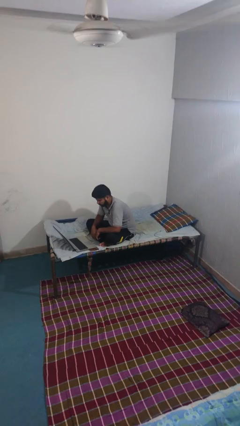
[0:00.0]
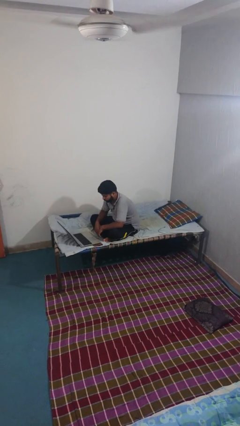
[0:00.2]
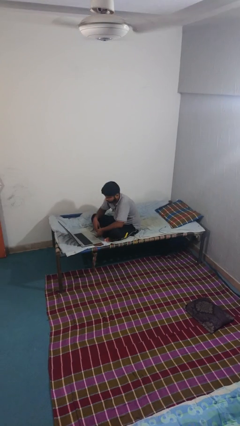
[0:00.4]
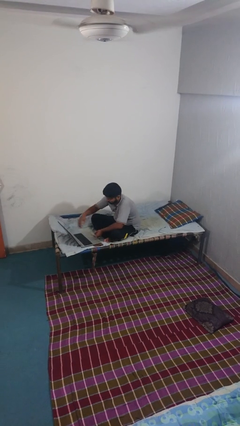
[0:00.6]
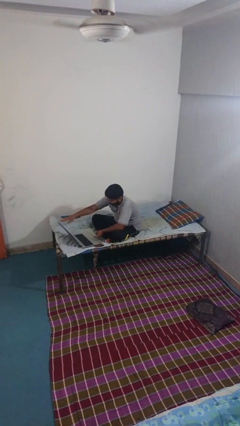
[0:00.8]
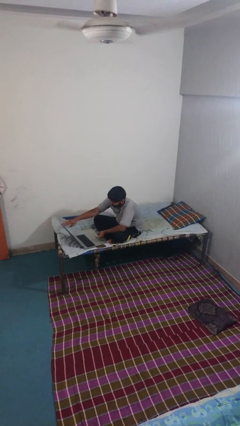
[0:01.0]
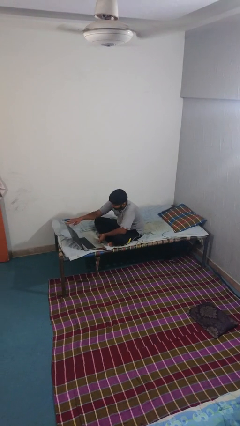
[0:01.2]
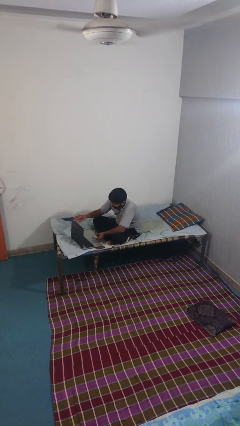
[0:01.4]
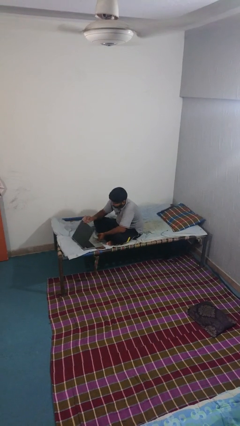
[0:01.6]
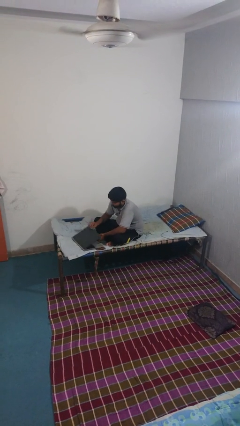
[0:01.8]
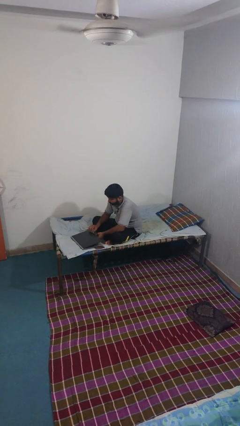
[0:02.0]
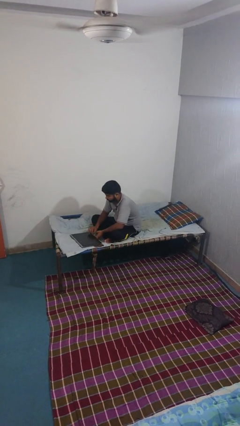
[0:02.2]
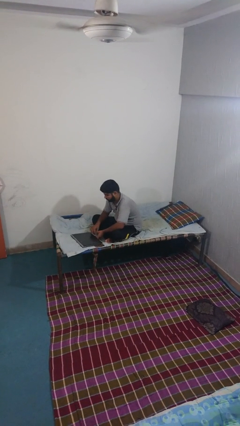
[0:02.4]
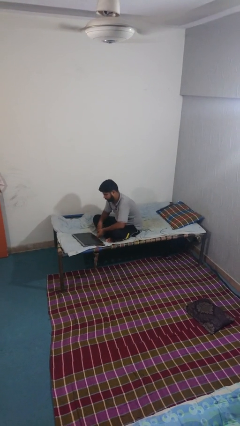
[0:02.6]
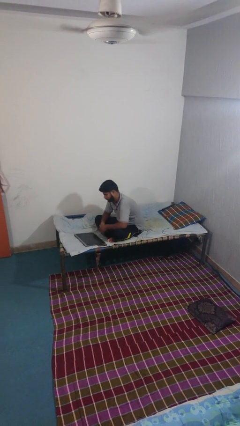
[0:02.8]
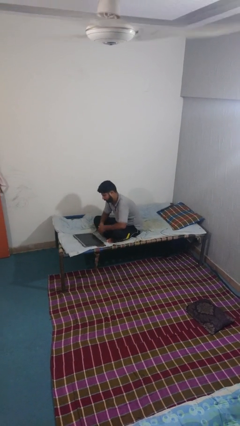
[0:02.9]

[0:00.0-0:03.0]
person closes laptop

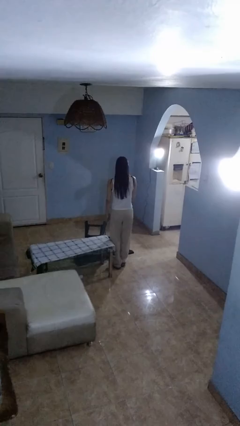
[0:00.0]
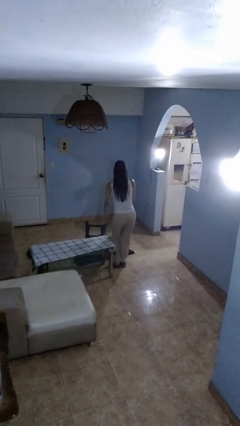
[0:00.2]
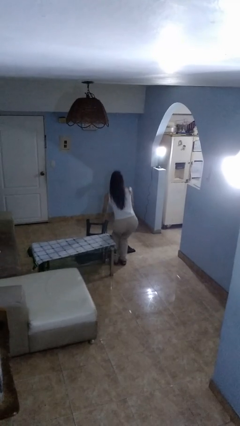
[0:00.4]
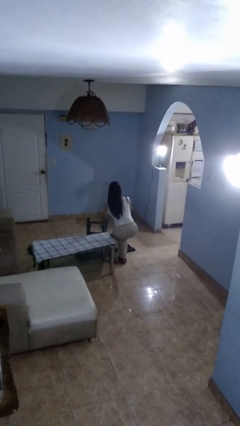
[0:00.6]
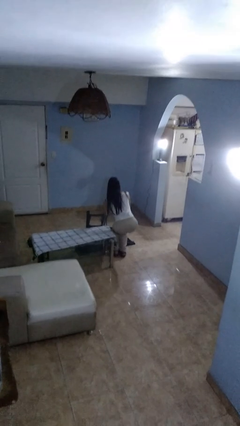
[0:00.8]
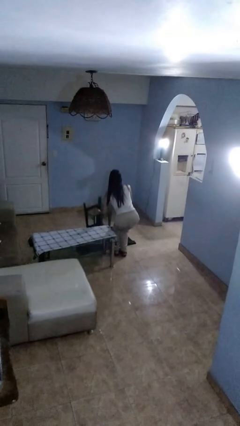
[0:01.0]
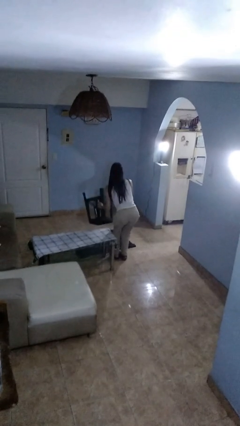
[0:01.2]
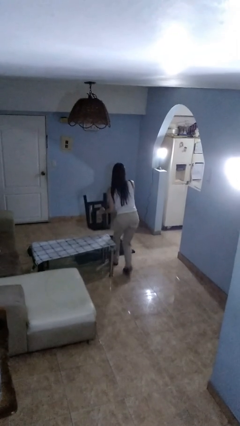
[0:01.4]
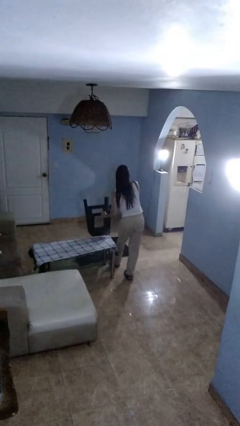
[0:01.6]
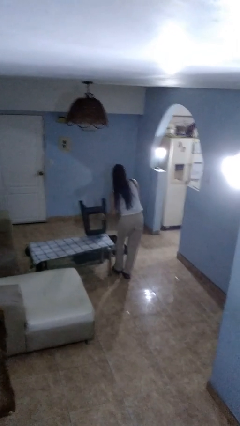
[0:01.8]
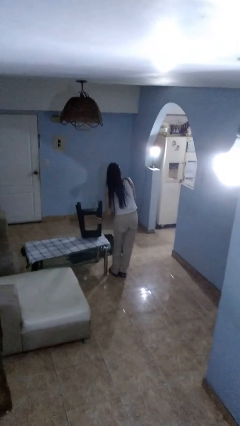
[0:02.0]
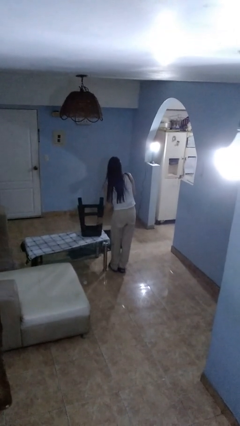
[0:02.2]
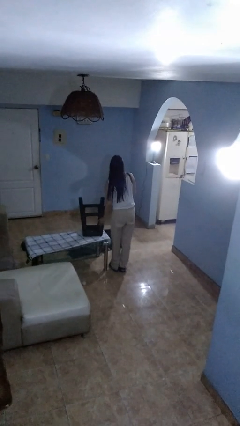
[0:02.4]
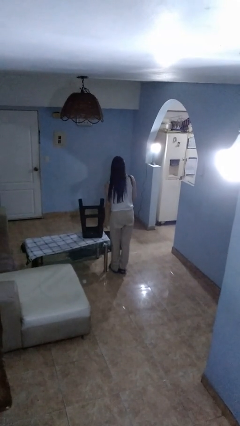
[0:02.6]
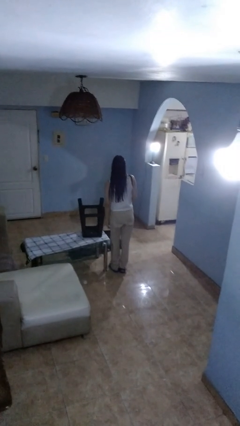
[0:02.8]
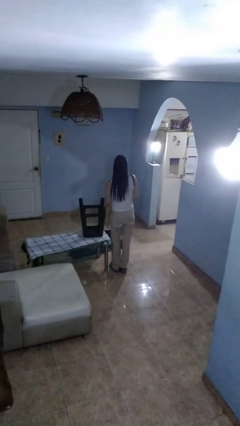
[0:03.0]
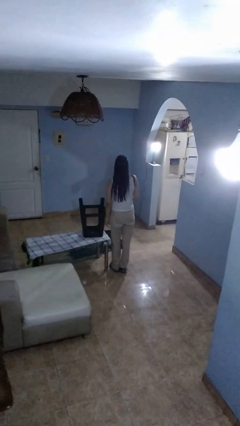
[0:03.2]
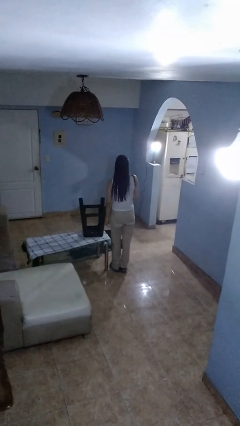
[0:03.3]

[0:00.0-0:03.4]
person sets upright furniture

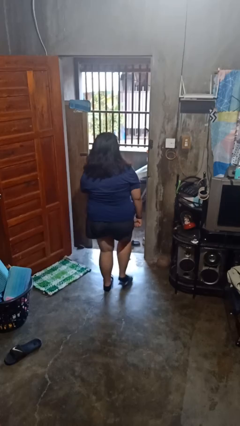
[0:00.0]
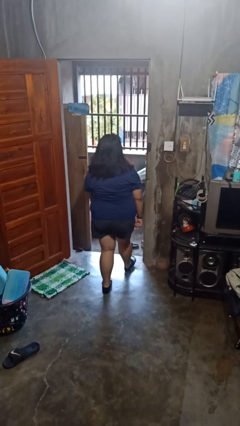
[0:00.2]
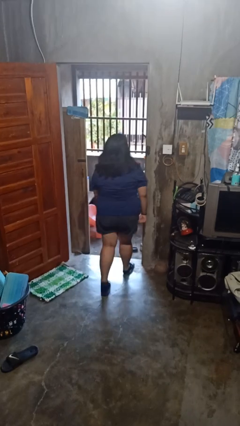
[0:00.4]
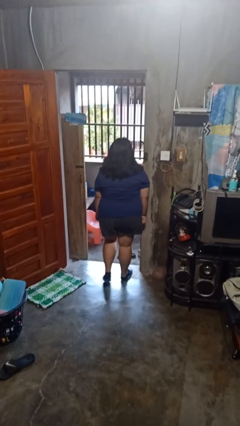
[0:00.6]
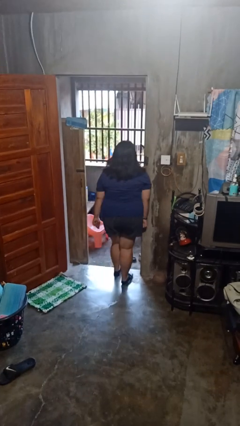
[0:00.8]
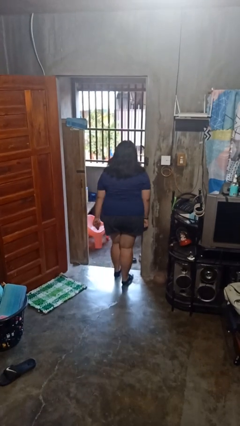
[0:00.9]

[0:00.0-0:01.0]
person bumps into wall

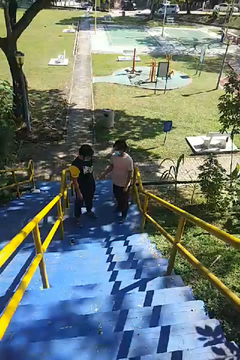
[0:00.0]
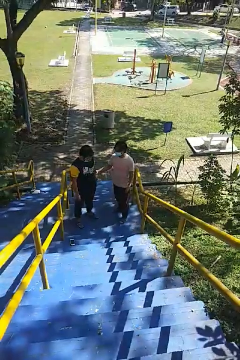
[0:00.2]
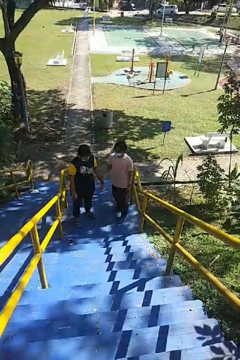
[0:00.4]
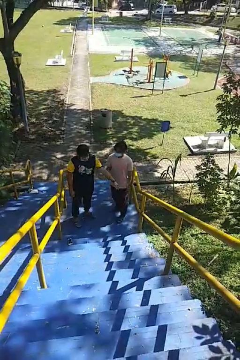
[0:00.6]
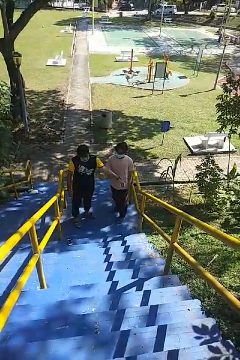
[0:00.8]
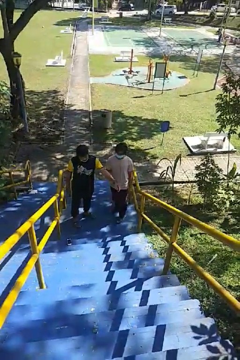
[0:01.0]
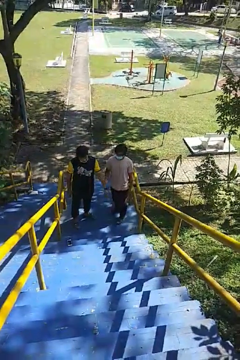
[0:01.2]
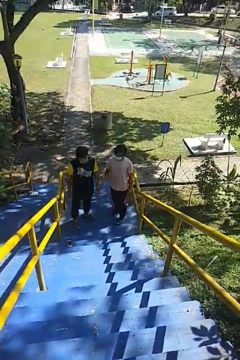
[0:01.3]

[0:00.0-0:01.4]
person grabs person by forearm

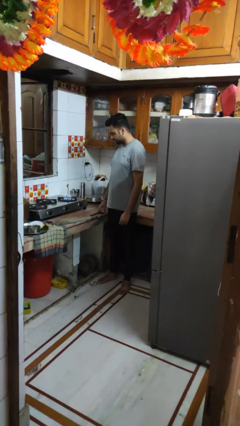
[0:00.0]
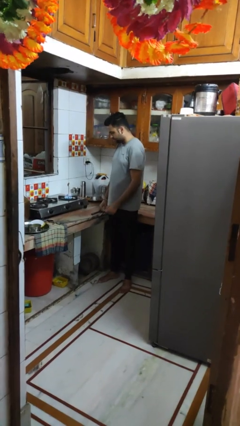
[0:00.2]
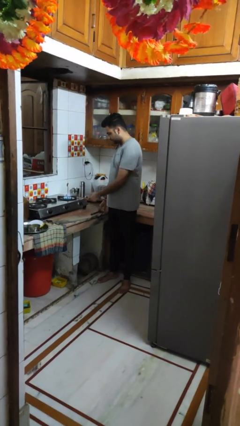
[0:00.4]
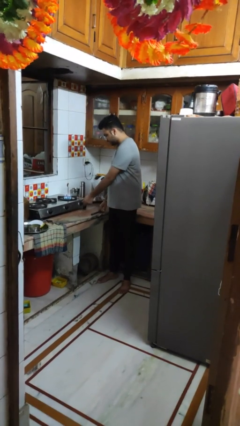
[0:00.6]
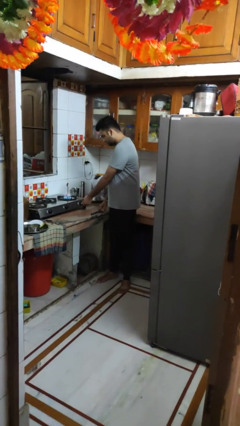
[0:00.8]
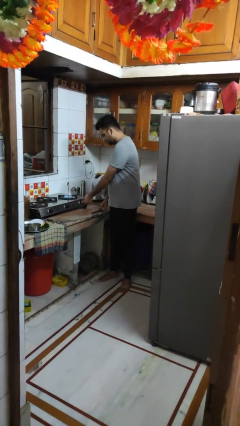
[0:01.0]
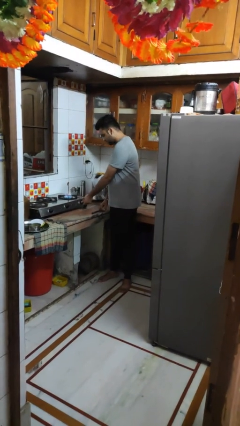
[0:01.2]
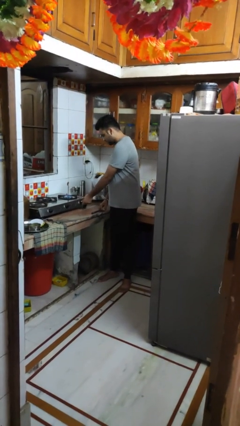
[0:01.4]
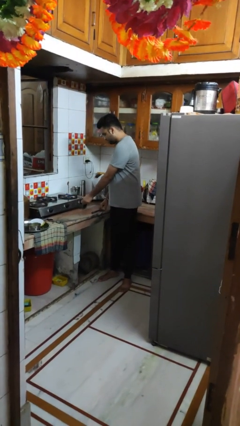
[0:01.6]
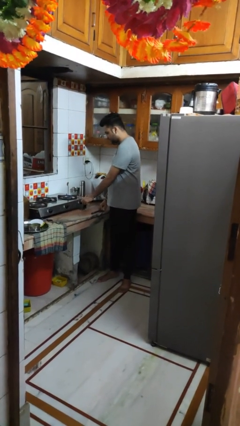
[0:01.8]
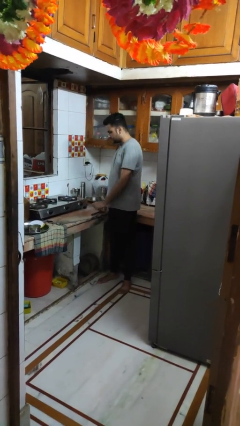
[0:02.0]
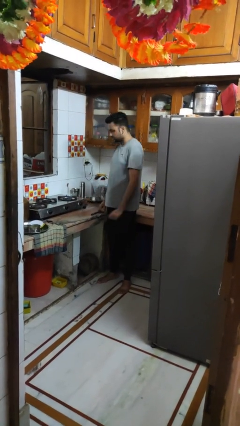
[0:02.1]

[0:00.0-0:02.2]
person turns off stovetop

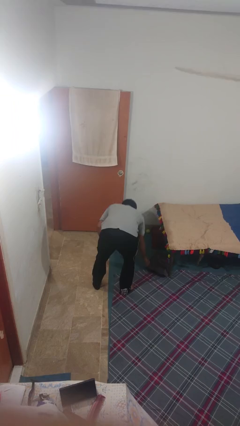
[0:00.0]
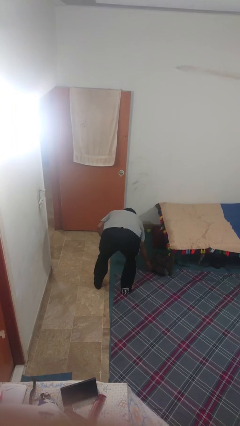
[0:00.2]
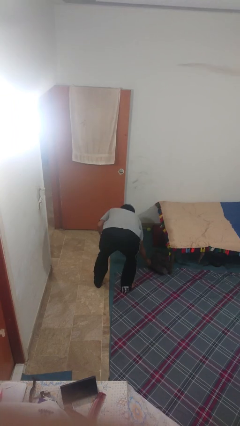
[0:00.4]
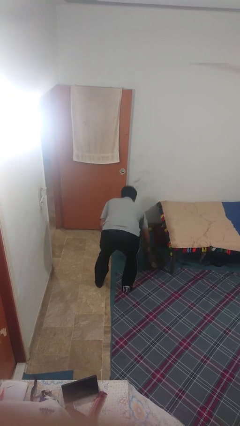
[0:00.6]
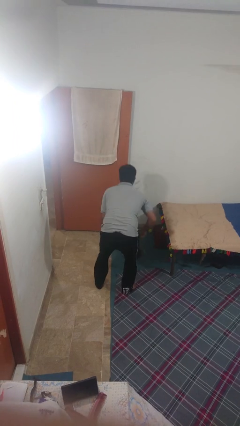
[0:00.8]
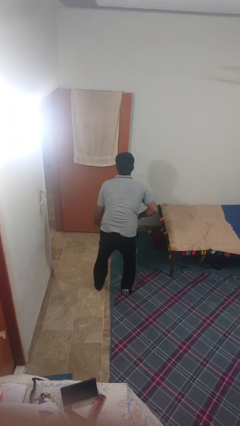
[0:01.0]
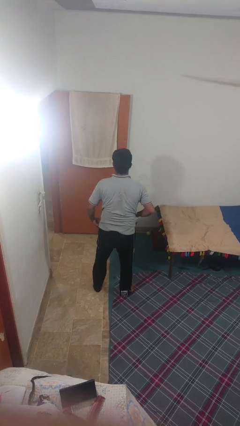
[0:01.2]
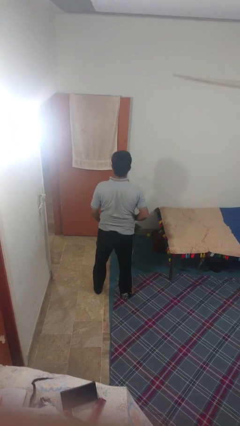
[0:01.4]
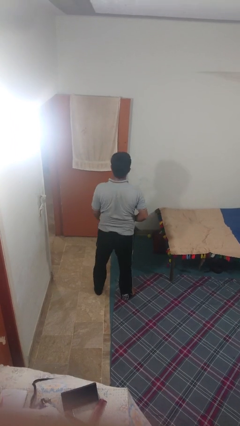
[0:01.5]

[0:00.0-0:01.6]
person picks up object from floor

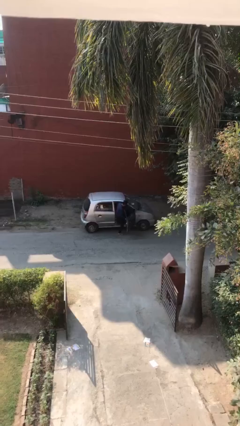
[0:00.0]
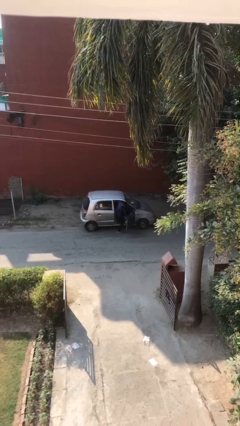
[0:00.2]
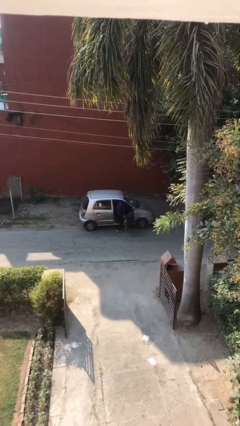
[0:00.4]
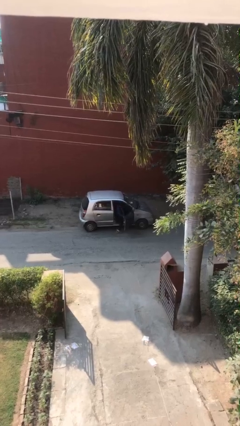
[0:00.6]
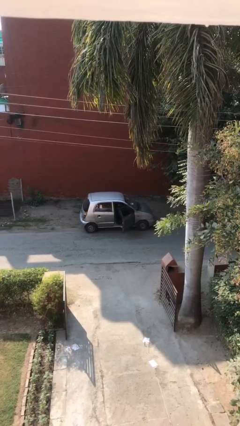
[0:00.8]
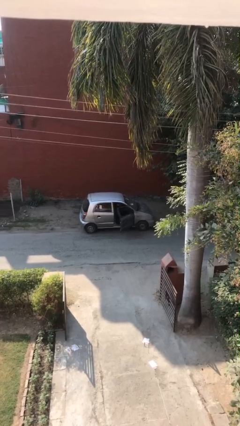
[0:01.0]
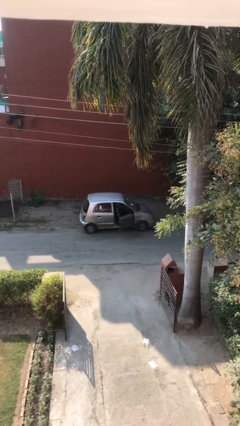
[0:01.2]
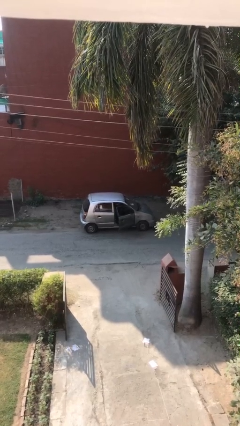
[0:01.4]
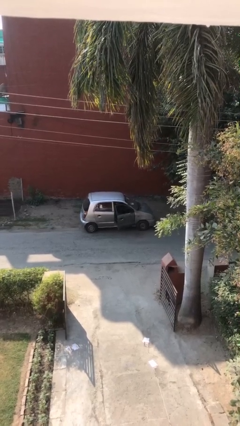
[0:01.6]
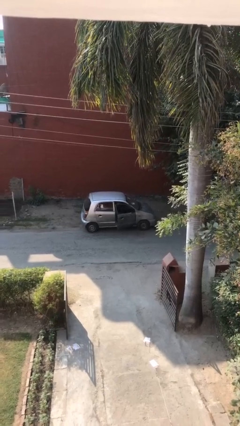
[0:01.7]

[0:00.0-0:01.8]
person enters car

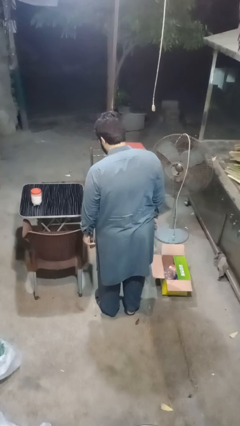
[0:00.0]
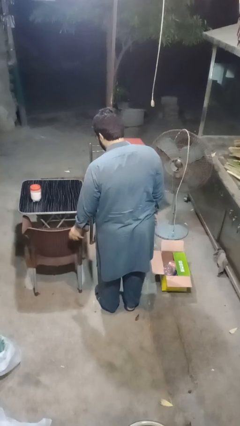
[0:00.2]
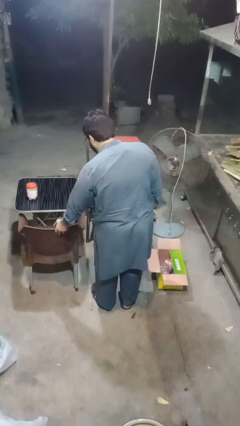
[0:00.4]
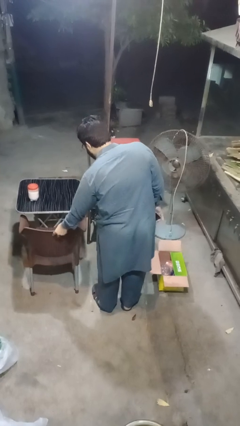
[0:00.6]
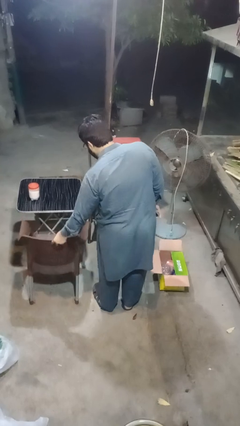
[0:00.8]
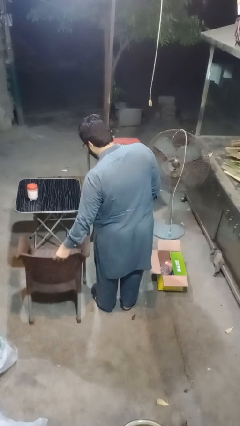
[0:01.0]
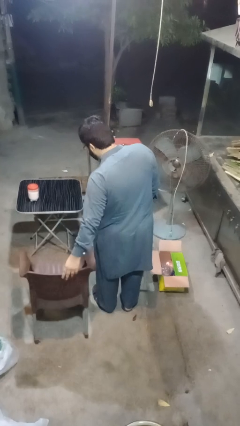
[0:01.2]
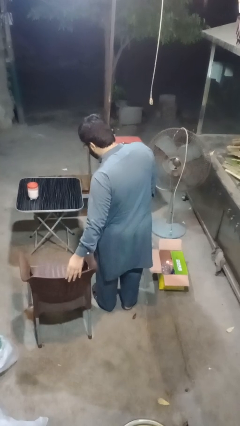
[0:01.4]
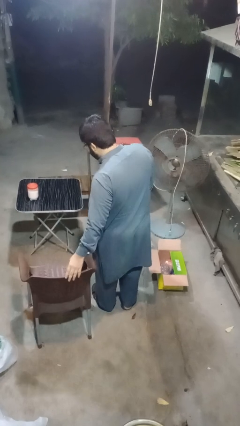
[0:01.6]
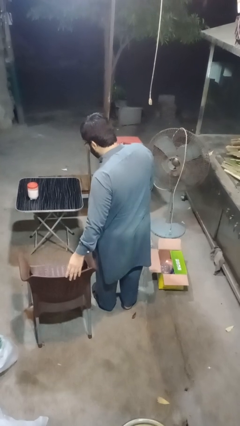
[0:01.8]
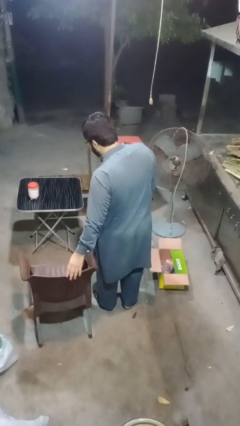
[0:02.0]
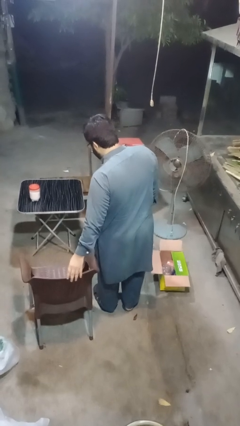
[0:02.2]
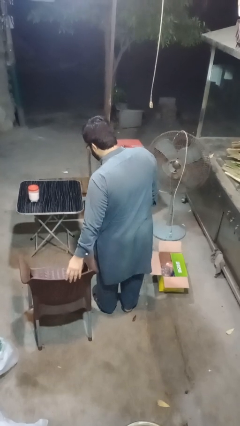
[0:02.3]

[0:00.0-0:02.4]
person pulls out chair

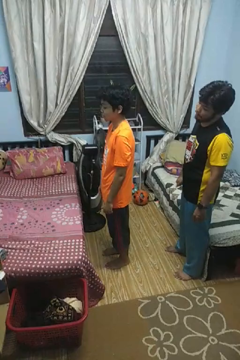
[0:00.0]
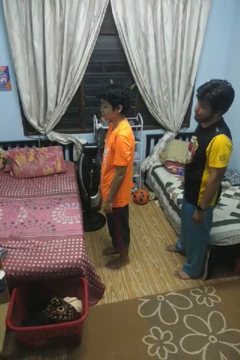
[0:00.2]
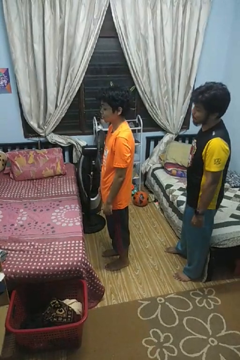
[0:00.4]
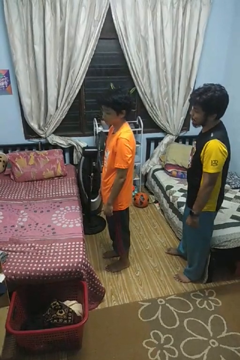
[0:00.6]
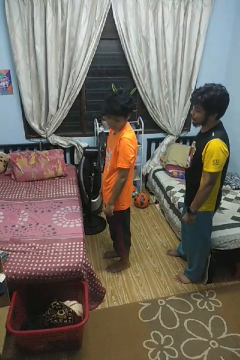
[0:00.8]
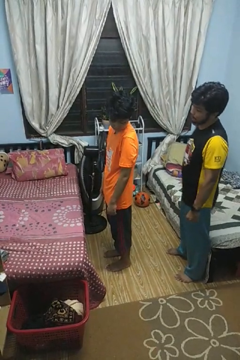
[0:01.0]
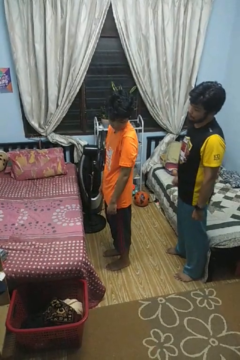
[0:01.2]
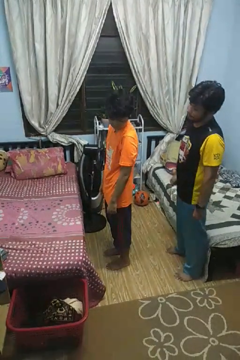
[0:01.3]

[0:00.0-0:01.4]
person looks over shoulder
